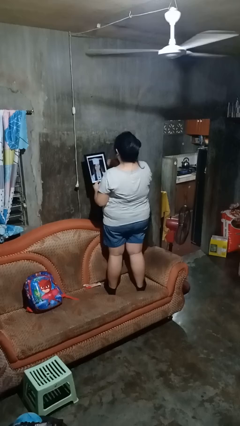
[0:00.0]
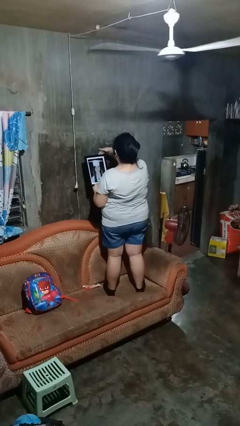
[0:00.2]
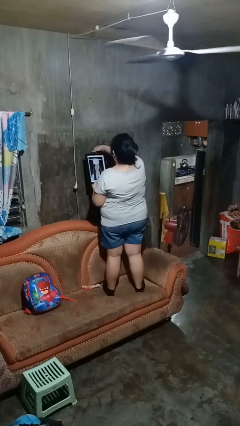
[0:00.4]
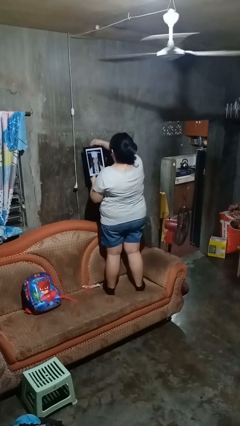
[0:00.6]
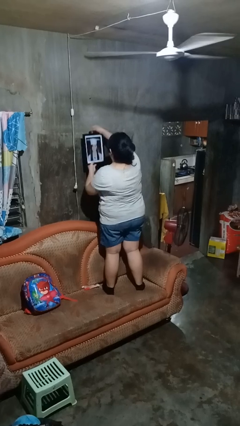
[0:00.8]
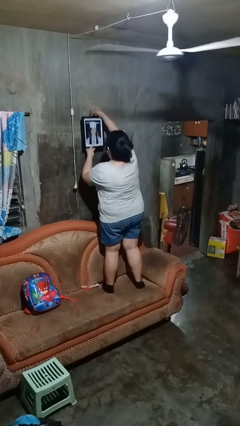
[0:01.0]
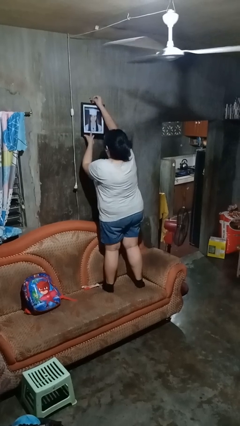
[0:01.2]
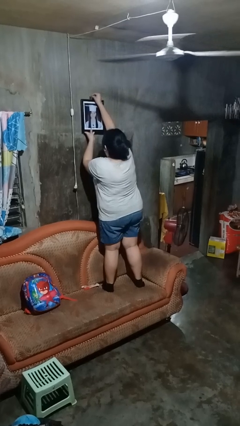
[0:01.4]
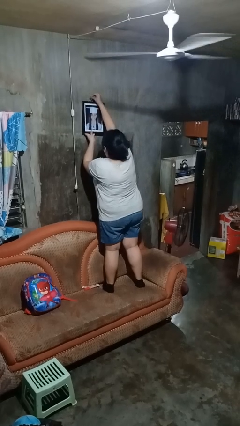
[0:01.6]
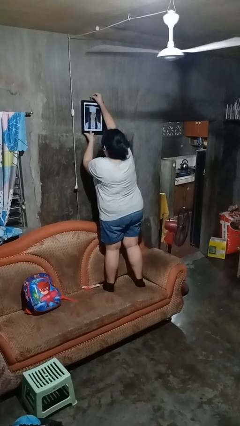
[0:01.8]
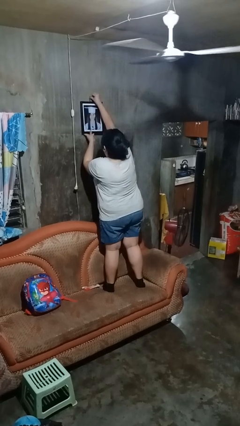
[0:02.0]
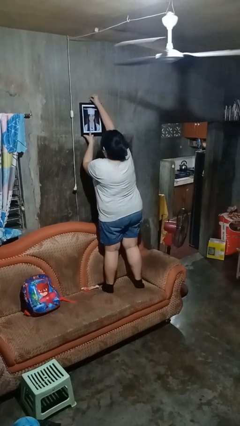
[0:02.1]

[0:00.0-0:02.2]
person puts up picture frame

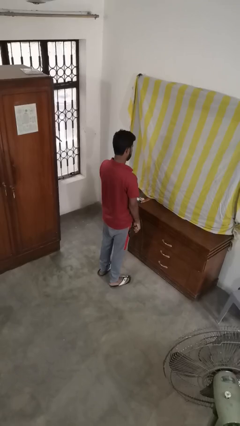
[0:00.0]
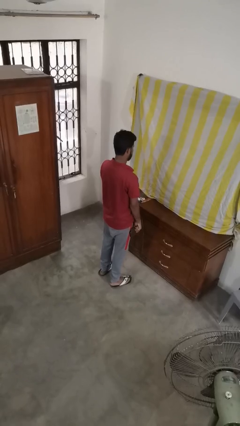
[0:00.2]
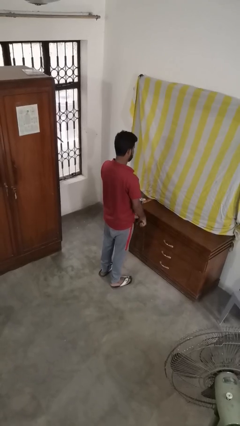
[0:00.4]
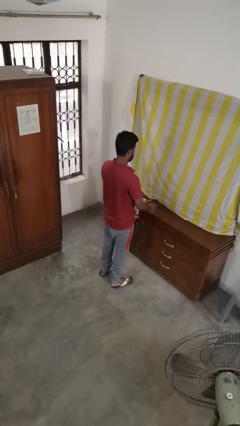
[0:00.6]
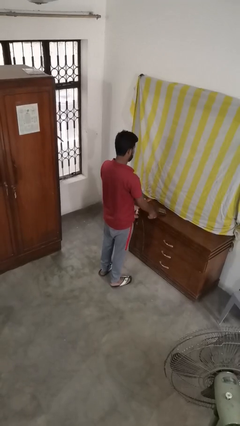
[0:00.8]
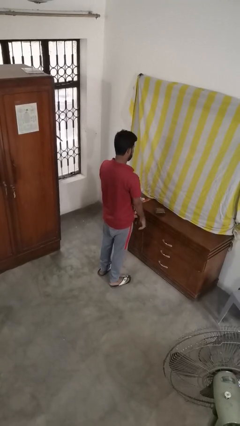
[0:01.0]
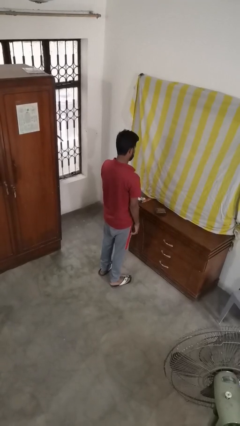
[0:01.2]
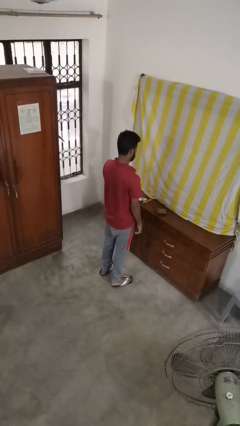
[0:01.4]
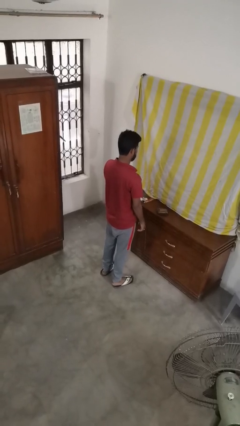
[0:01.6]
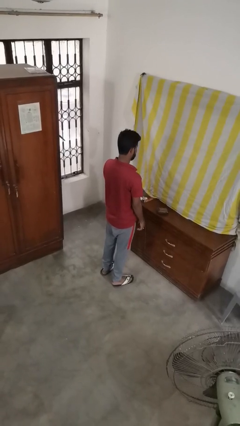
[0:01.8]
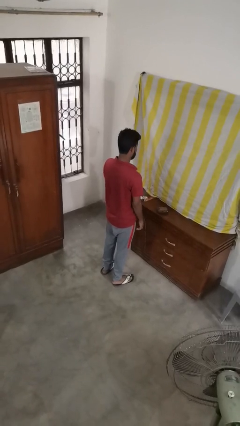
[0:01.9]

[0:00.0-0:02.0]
person throws object on table

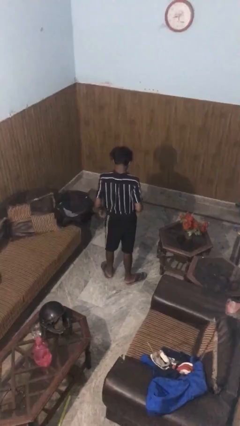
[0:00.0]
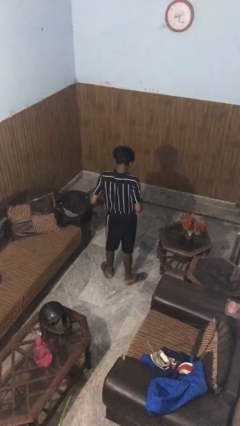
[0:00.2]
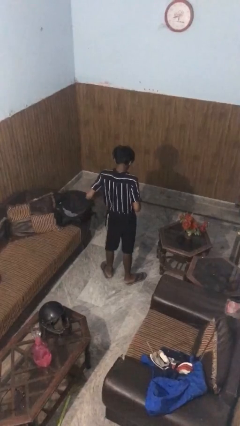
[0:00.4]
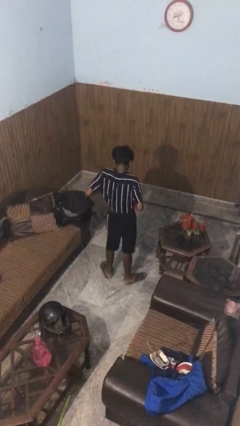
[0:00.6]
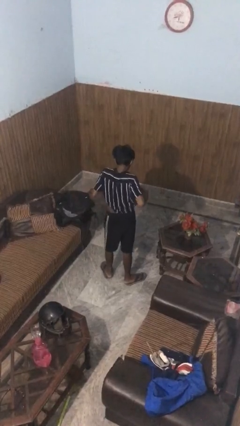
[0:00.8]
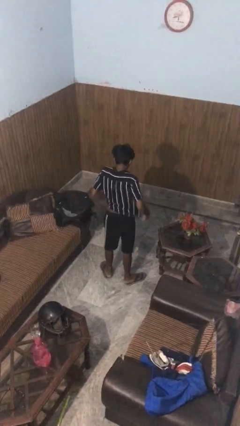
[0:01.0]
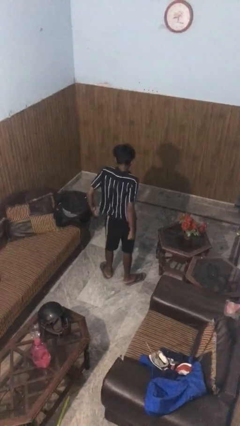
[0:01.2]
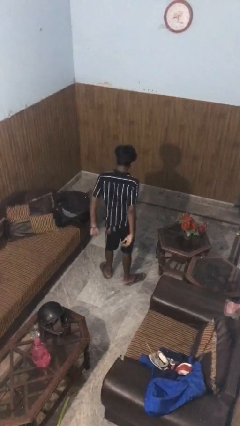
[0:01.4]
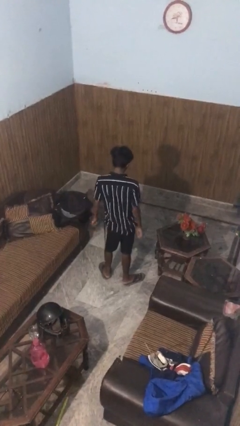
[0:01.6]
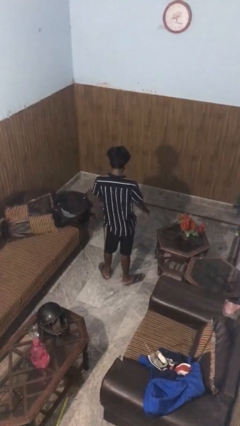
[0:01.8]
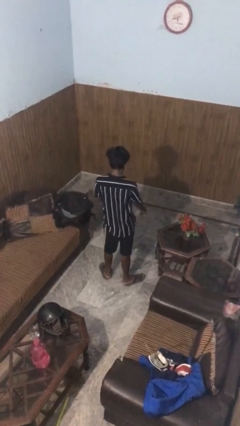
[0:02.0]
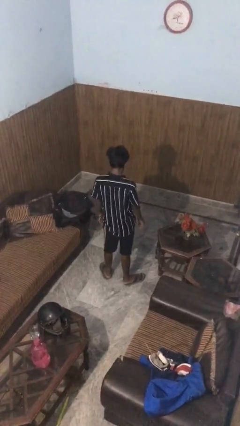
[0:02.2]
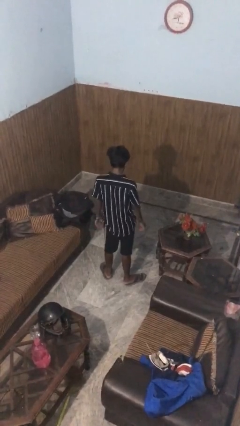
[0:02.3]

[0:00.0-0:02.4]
person untucks shirt

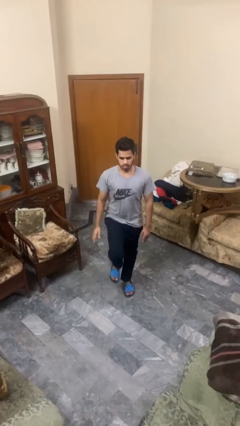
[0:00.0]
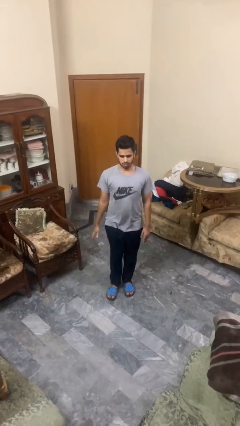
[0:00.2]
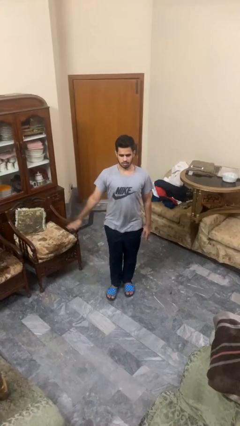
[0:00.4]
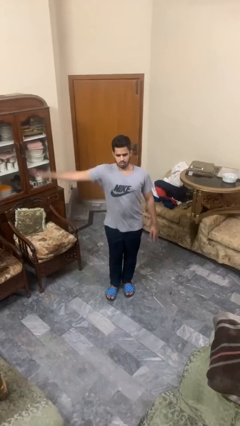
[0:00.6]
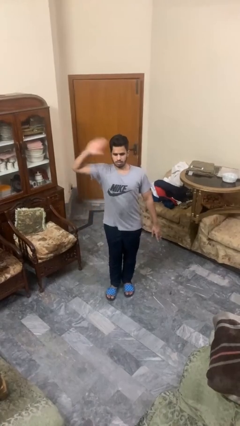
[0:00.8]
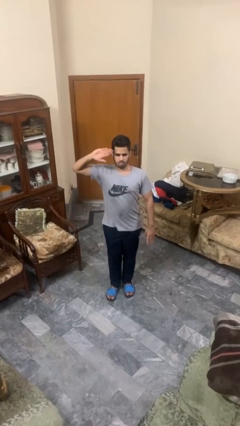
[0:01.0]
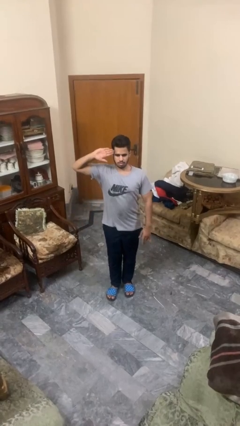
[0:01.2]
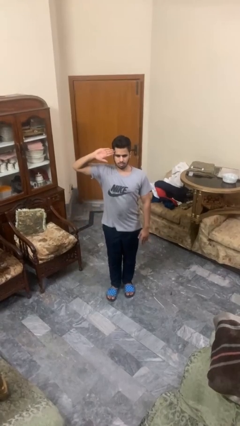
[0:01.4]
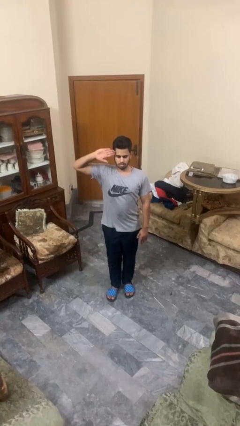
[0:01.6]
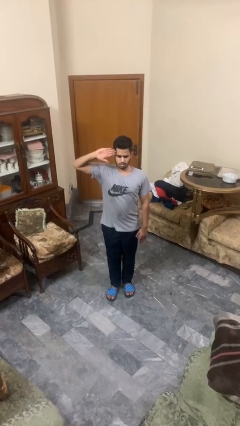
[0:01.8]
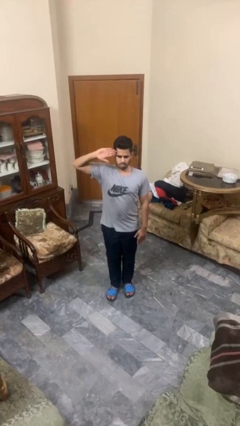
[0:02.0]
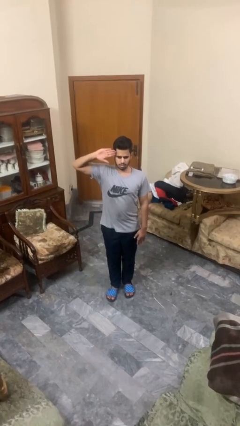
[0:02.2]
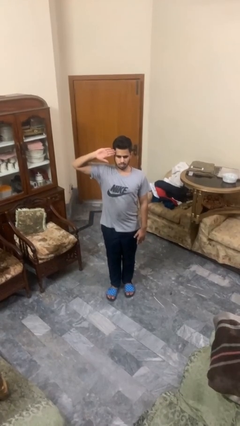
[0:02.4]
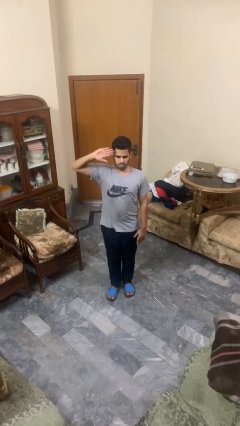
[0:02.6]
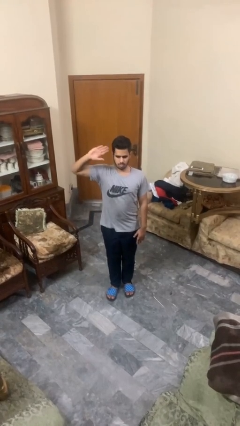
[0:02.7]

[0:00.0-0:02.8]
person salutes

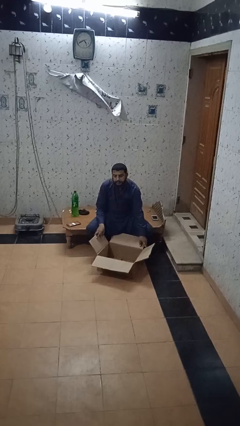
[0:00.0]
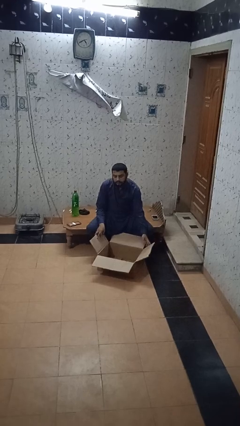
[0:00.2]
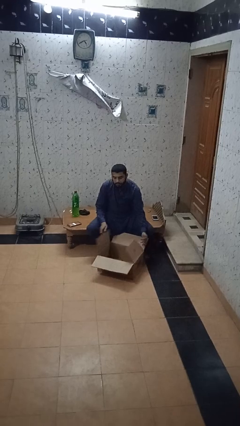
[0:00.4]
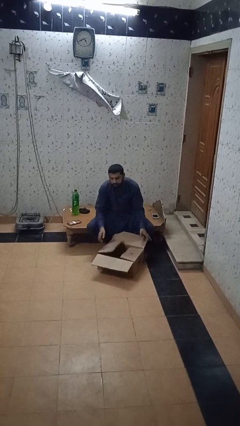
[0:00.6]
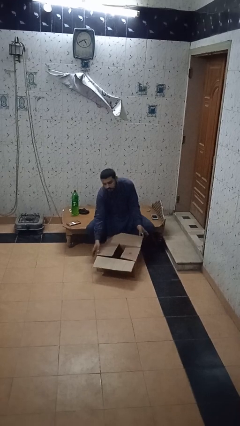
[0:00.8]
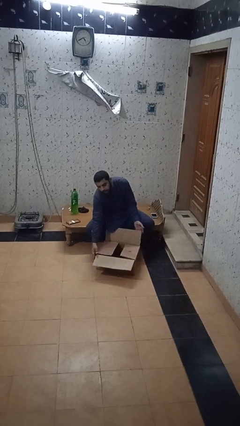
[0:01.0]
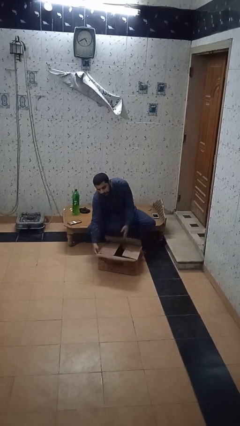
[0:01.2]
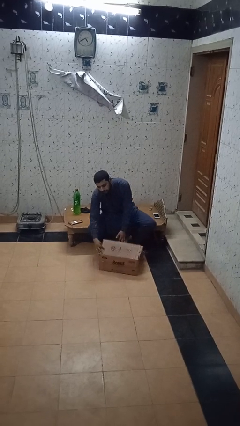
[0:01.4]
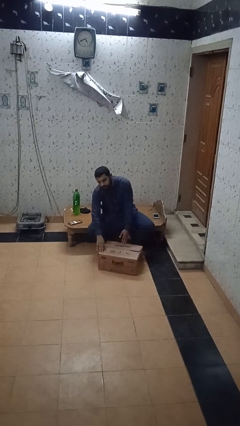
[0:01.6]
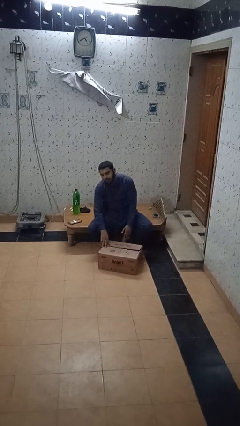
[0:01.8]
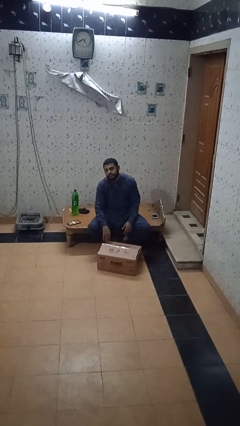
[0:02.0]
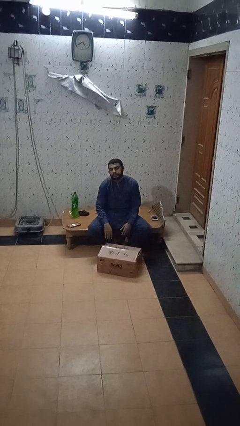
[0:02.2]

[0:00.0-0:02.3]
person closes box

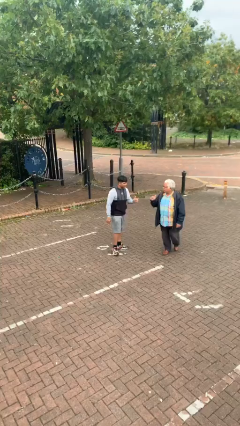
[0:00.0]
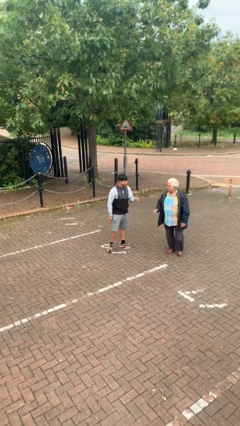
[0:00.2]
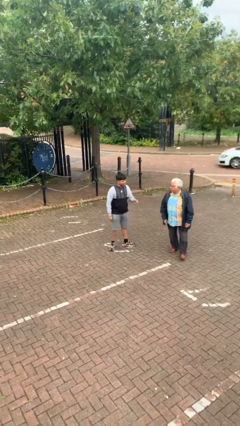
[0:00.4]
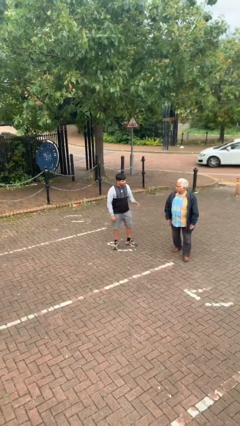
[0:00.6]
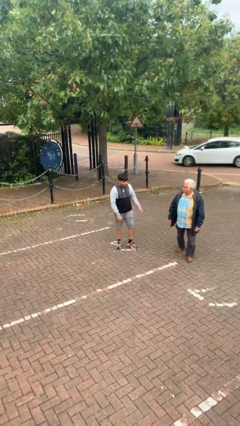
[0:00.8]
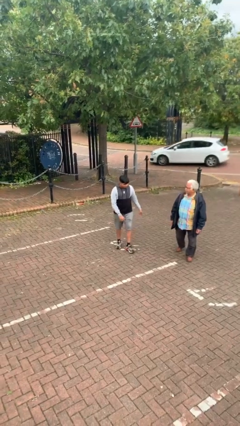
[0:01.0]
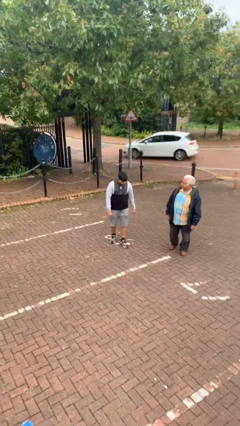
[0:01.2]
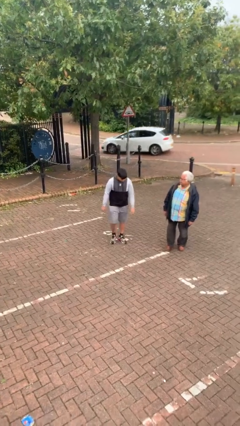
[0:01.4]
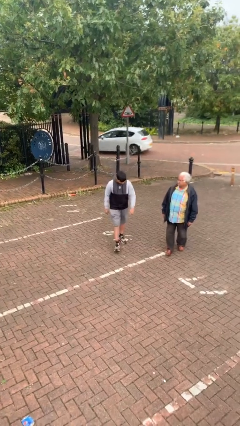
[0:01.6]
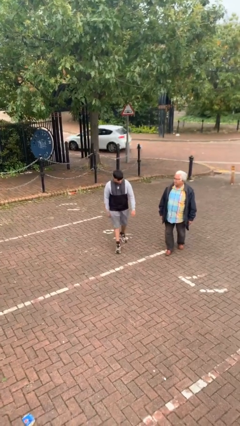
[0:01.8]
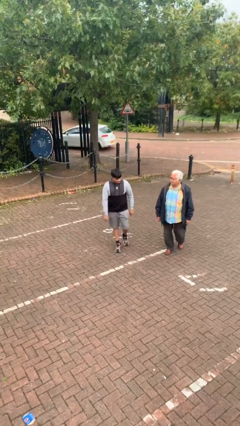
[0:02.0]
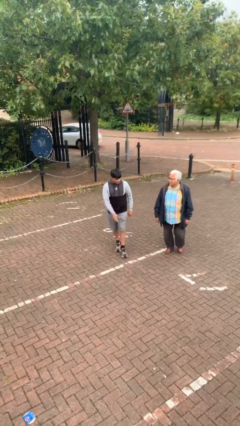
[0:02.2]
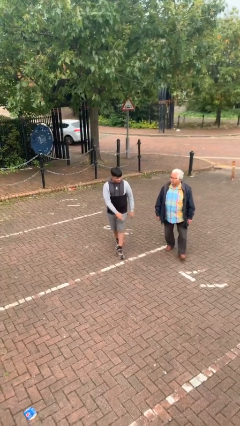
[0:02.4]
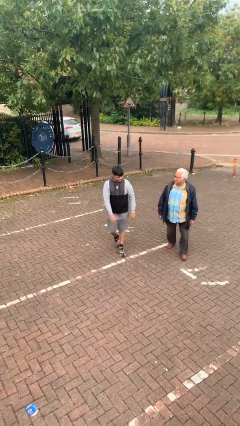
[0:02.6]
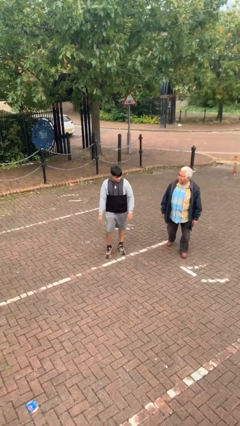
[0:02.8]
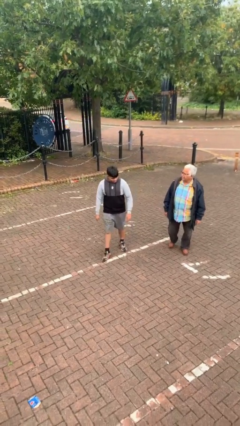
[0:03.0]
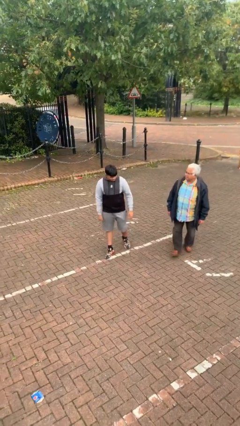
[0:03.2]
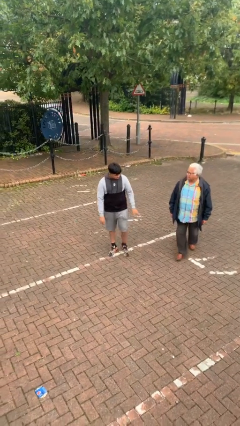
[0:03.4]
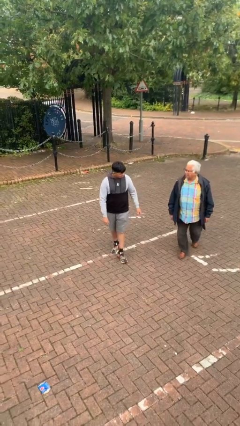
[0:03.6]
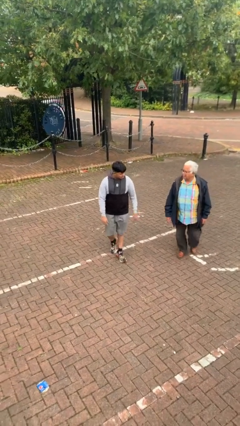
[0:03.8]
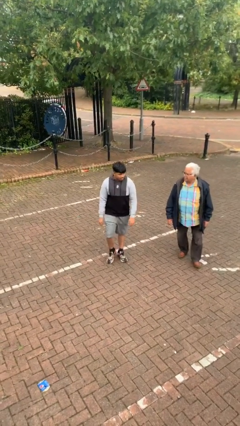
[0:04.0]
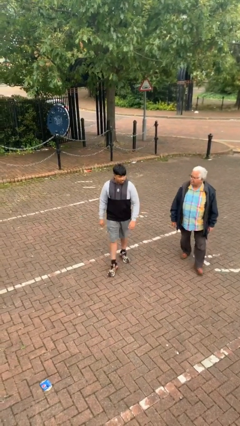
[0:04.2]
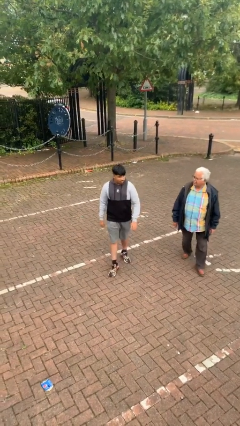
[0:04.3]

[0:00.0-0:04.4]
person talks to person

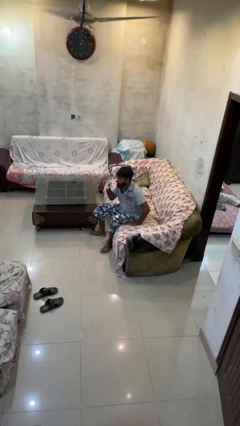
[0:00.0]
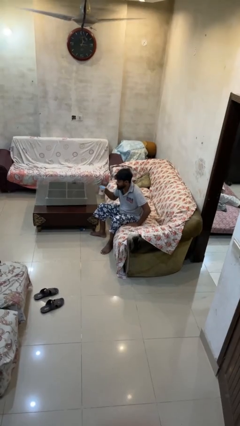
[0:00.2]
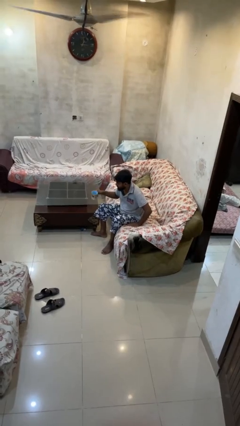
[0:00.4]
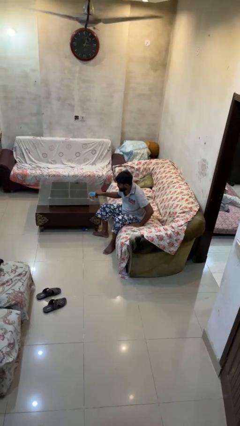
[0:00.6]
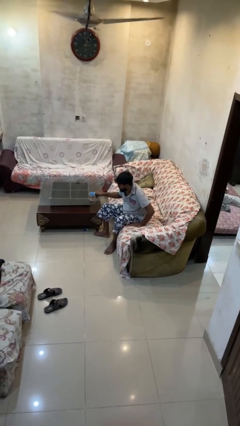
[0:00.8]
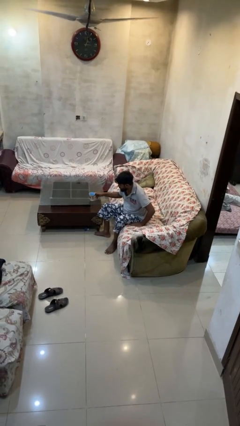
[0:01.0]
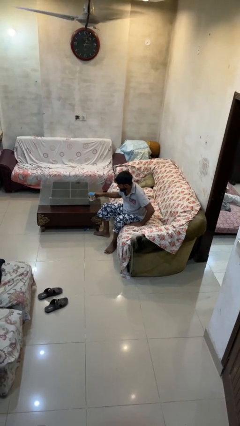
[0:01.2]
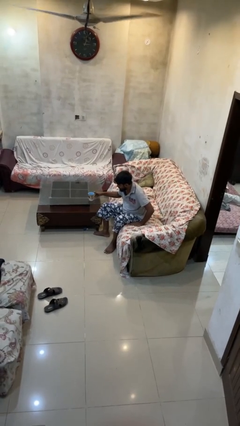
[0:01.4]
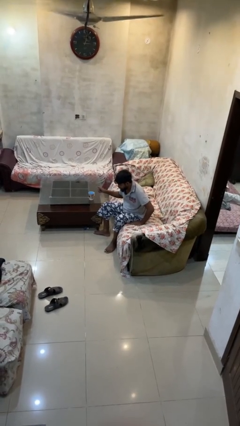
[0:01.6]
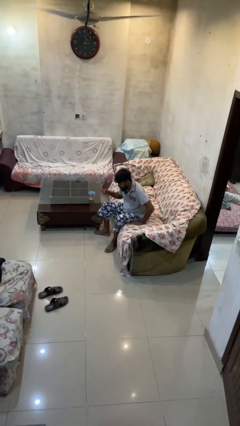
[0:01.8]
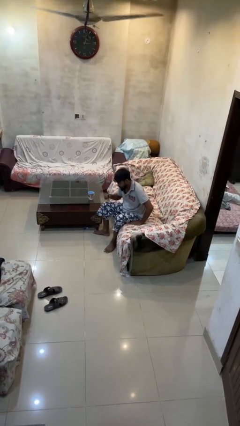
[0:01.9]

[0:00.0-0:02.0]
person puts down object on table
